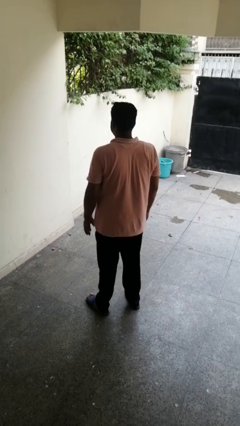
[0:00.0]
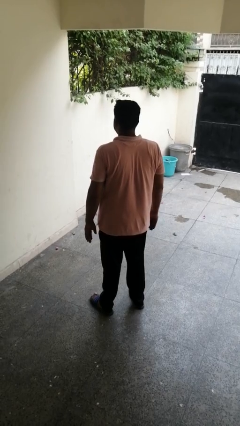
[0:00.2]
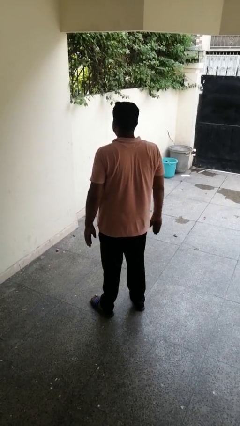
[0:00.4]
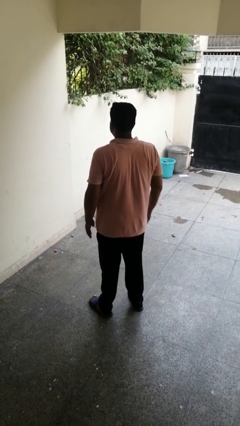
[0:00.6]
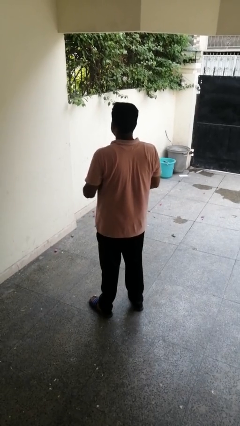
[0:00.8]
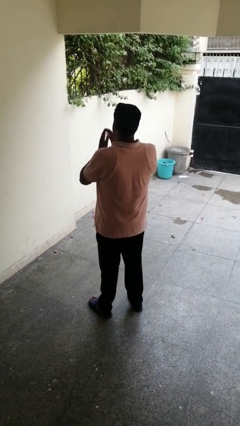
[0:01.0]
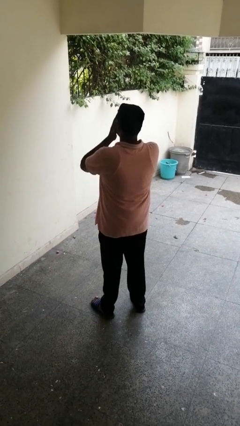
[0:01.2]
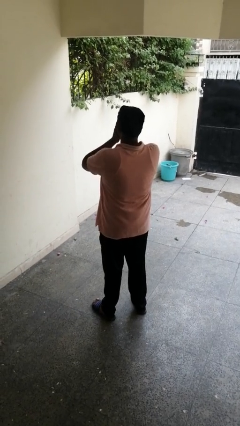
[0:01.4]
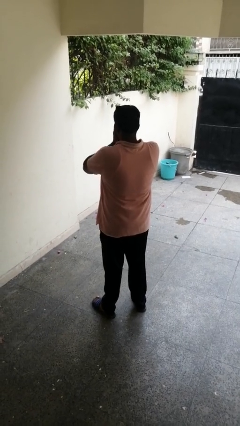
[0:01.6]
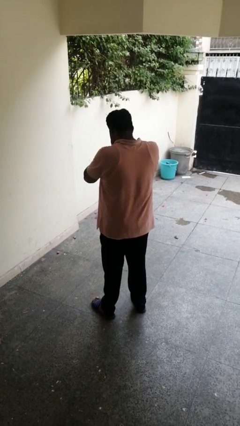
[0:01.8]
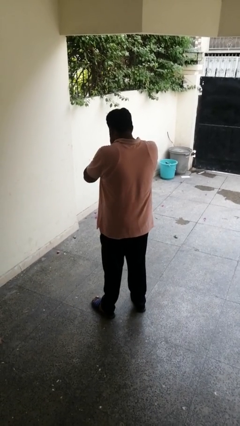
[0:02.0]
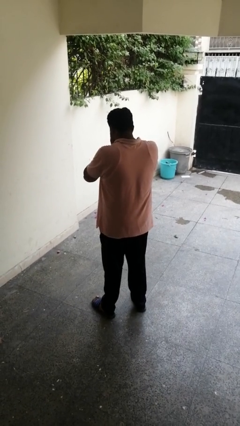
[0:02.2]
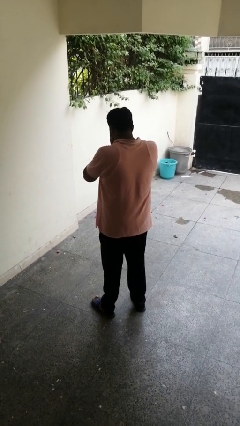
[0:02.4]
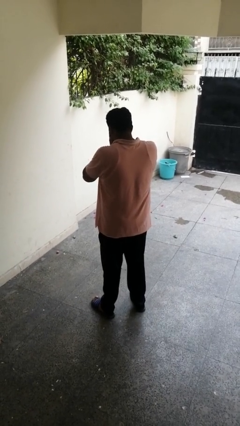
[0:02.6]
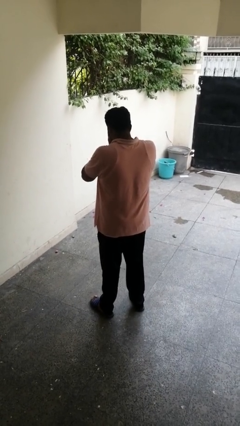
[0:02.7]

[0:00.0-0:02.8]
person sneezes into hand

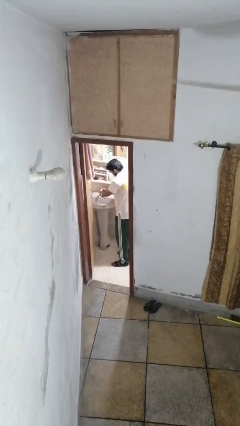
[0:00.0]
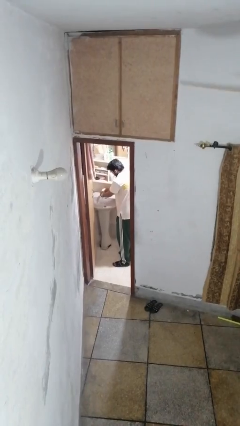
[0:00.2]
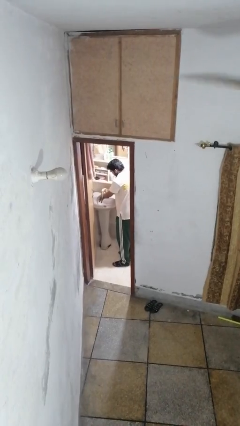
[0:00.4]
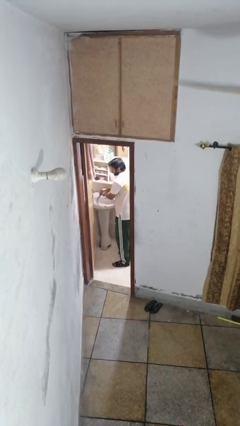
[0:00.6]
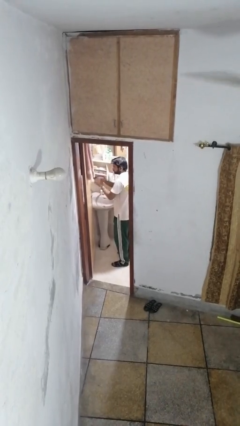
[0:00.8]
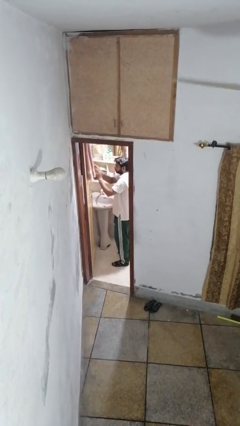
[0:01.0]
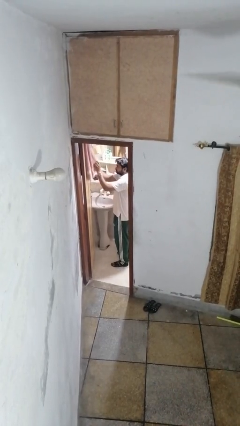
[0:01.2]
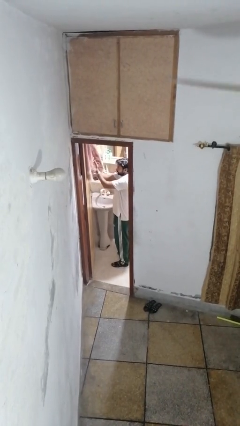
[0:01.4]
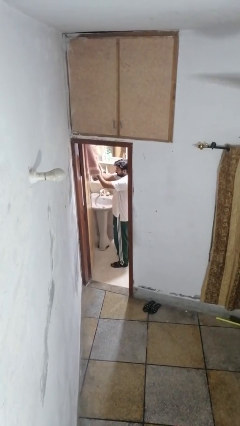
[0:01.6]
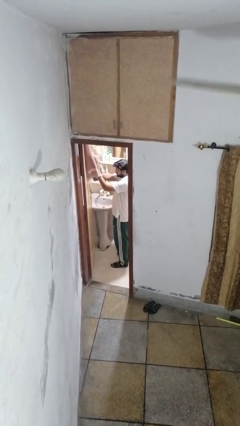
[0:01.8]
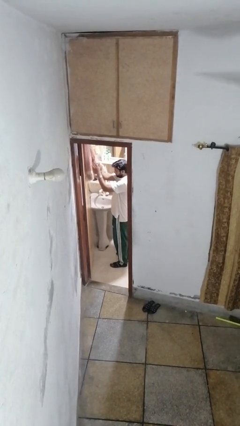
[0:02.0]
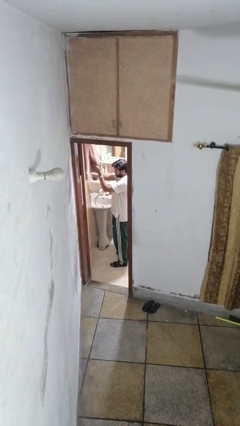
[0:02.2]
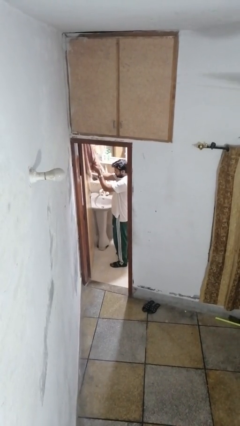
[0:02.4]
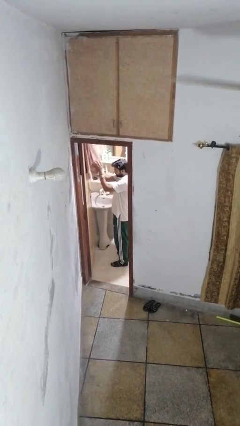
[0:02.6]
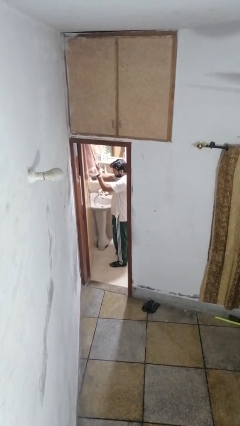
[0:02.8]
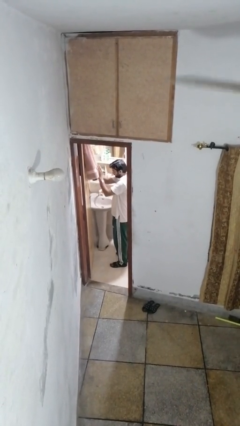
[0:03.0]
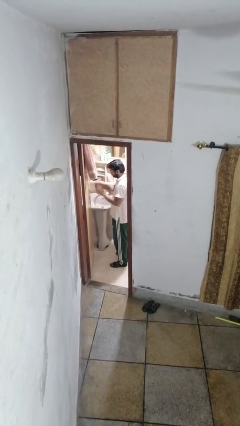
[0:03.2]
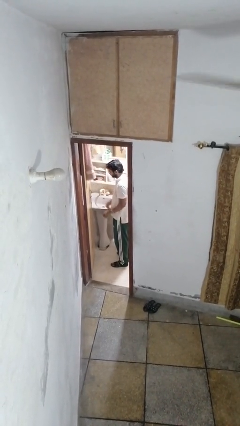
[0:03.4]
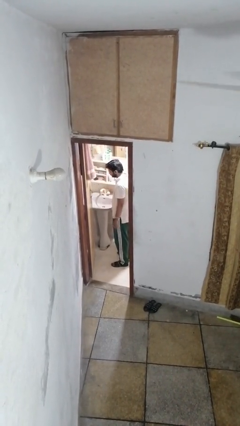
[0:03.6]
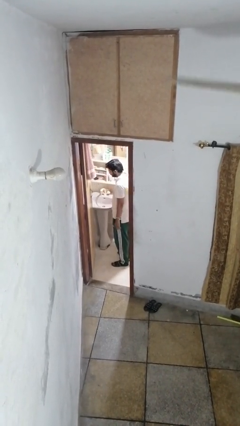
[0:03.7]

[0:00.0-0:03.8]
person dries hands with towel

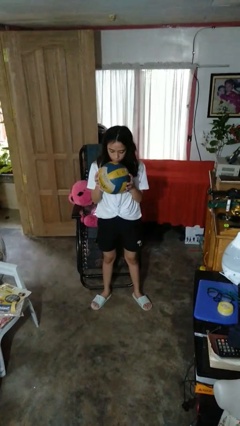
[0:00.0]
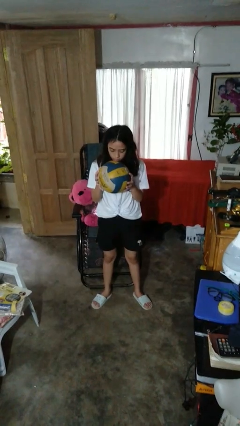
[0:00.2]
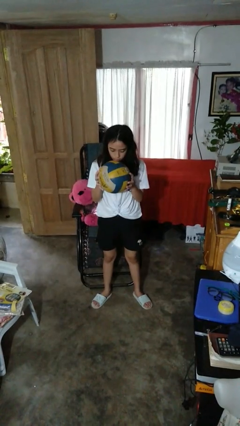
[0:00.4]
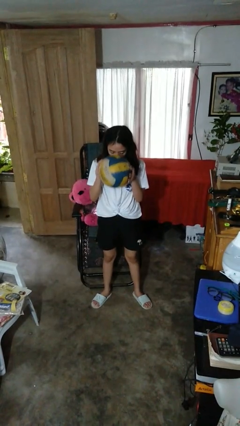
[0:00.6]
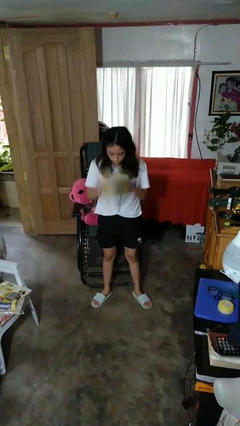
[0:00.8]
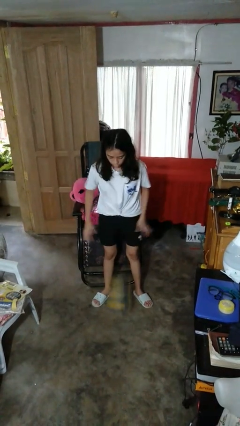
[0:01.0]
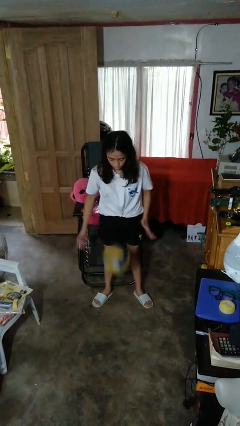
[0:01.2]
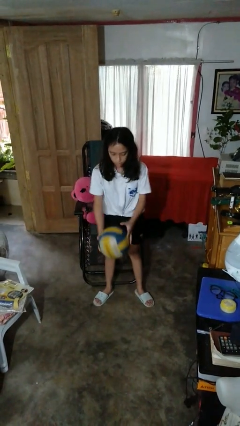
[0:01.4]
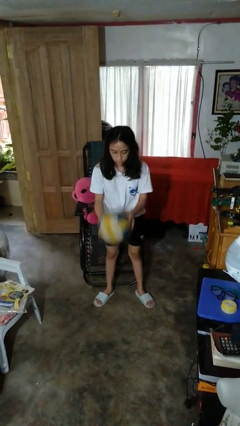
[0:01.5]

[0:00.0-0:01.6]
person bounces ball on floor

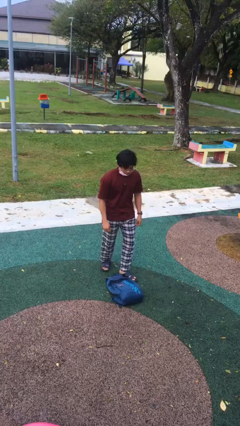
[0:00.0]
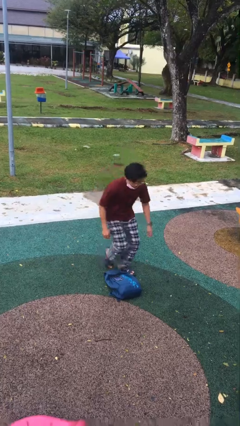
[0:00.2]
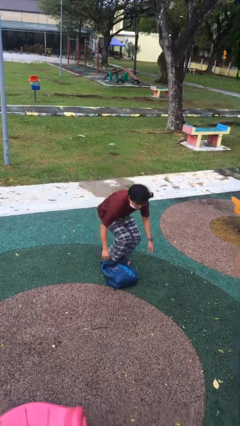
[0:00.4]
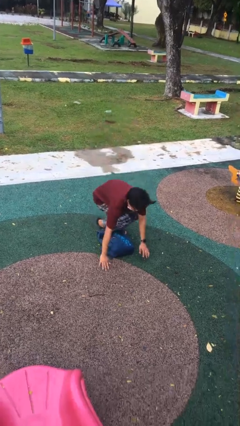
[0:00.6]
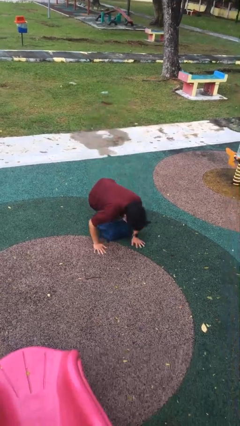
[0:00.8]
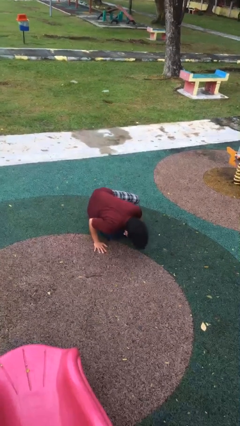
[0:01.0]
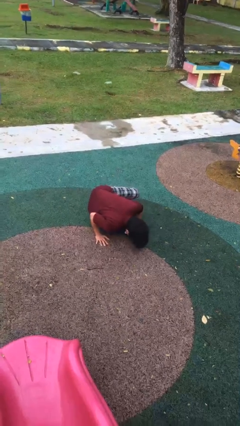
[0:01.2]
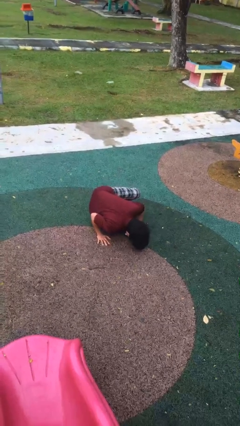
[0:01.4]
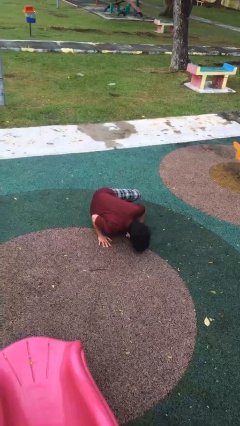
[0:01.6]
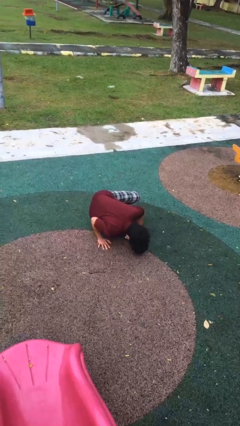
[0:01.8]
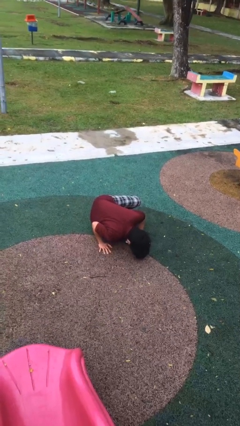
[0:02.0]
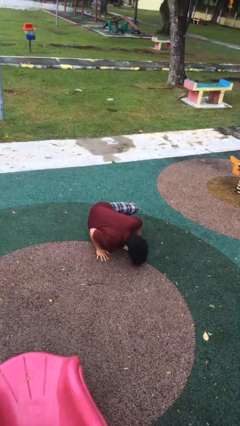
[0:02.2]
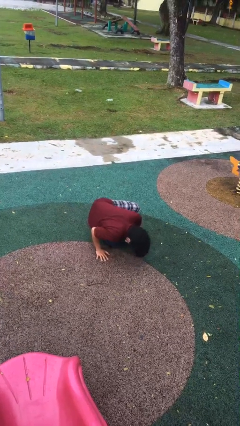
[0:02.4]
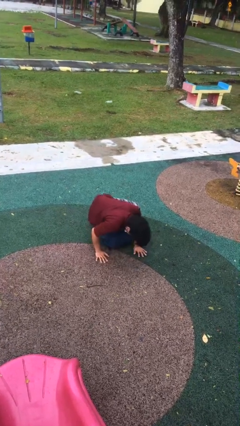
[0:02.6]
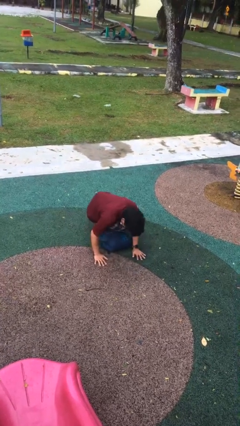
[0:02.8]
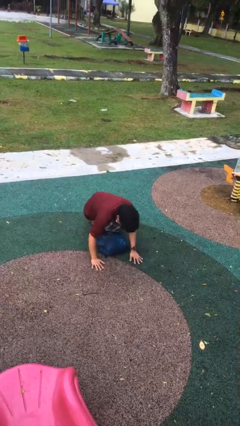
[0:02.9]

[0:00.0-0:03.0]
person trips on object on floor

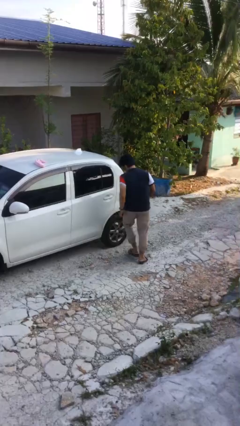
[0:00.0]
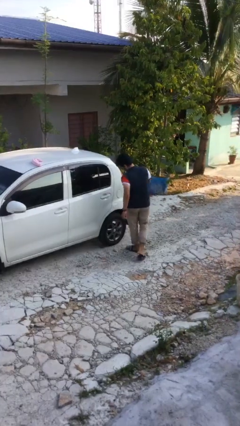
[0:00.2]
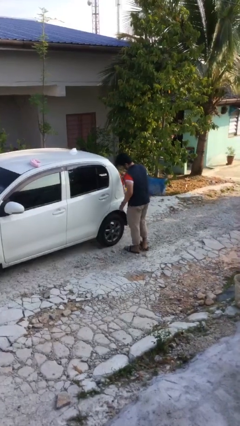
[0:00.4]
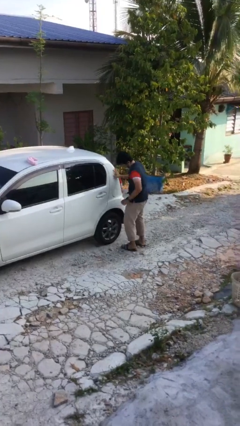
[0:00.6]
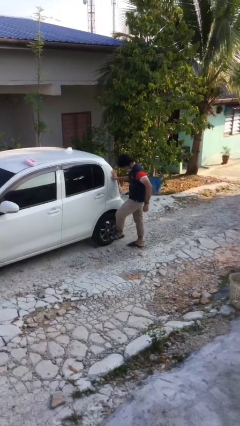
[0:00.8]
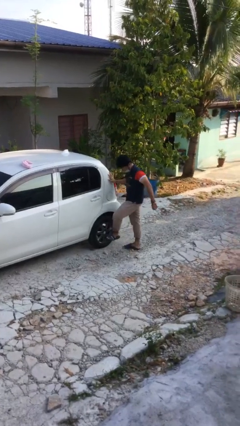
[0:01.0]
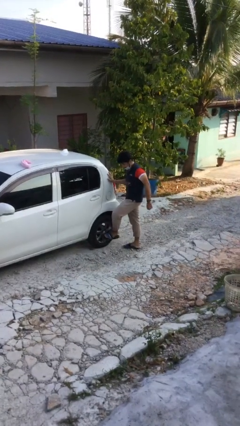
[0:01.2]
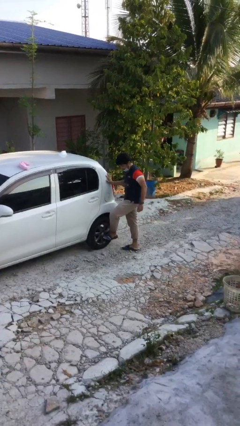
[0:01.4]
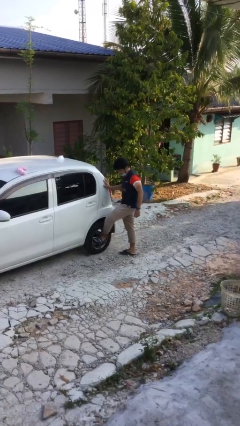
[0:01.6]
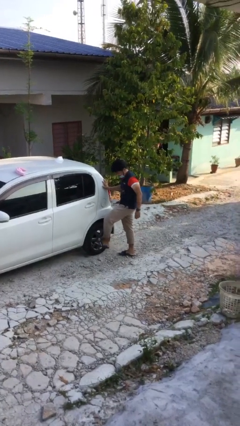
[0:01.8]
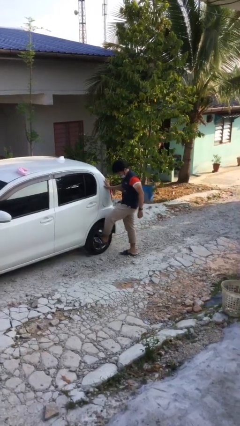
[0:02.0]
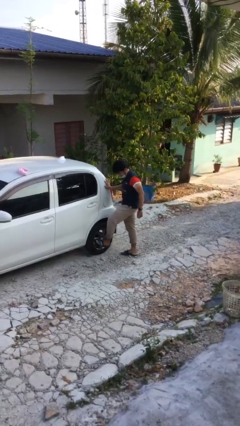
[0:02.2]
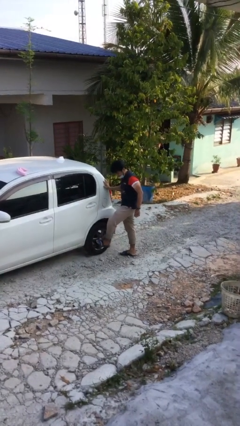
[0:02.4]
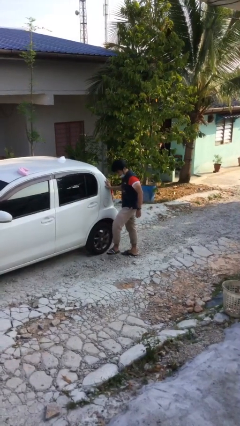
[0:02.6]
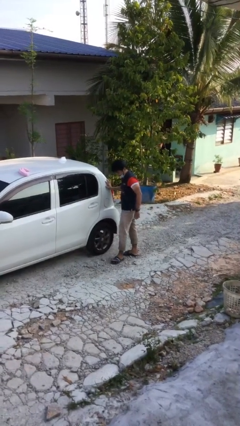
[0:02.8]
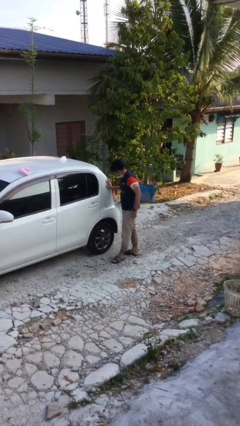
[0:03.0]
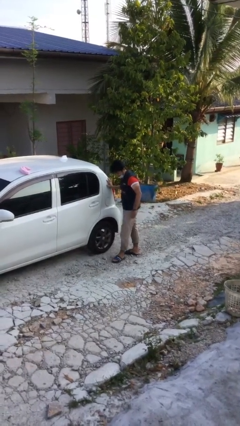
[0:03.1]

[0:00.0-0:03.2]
person kicks car tires

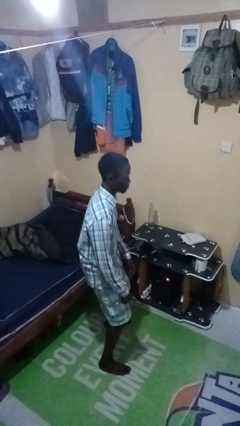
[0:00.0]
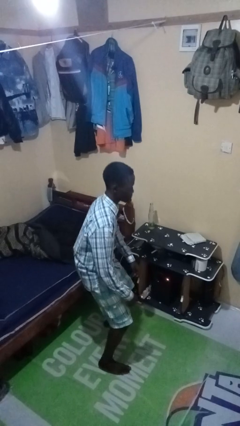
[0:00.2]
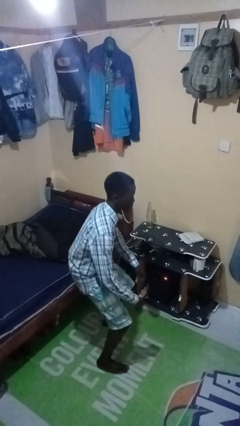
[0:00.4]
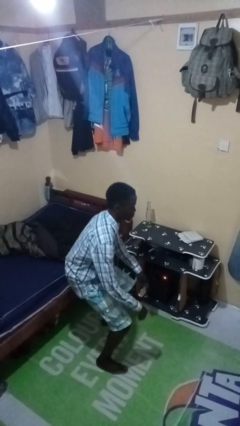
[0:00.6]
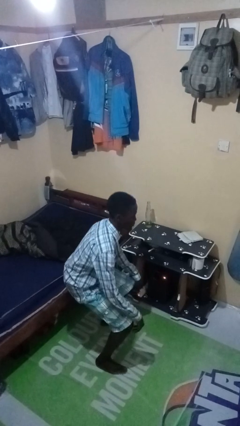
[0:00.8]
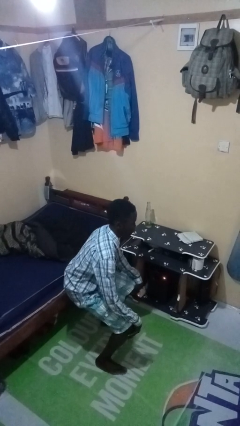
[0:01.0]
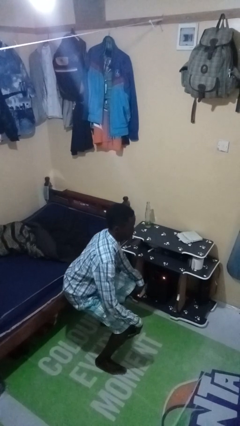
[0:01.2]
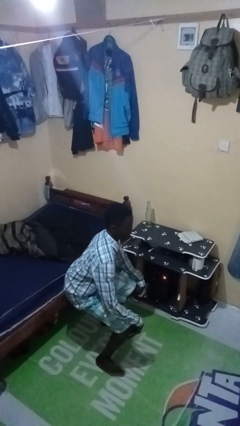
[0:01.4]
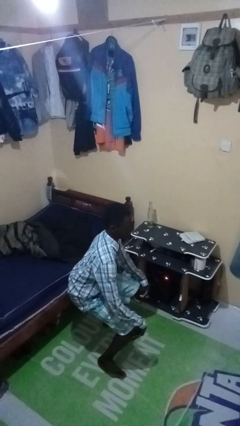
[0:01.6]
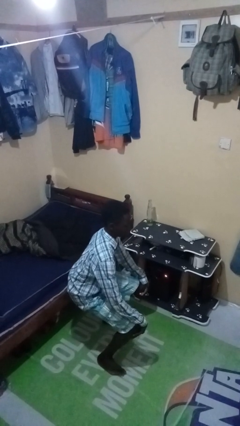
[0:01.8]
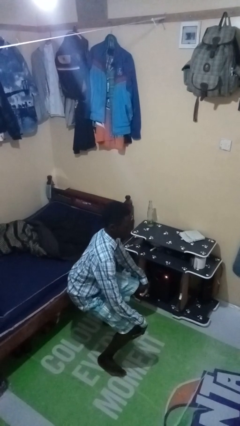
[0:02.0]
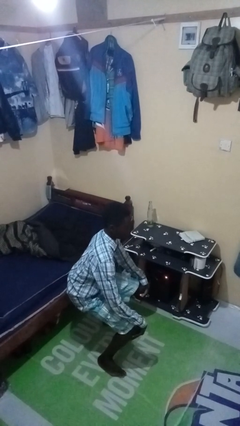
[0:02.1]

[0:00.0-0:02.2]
person squats

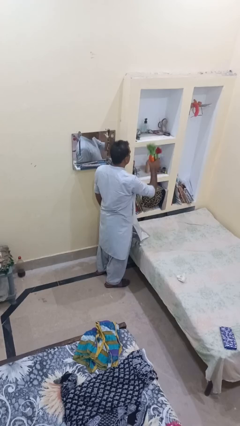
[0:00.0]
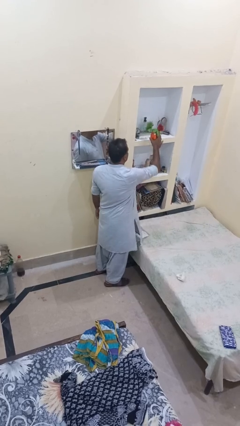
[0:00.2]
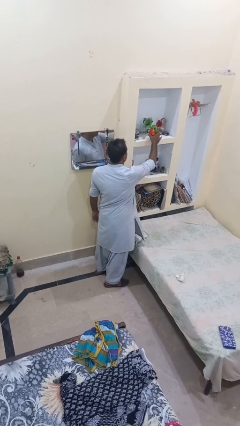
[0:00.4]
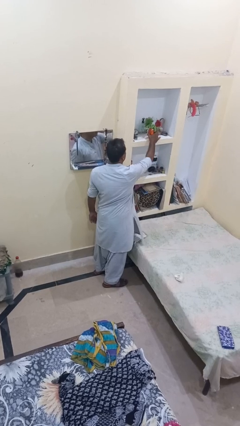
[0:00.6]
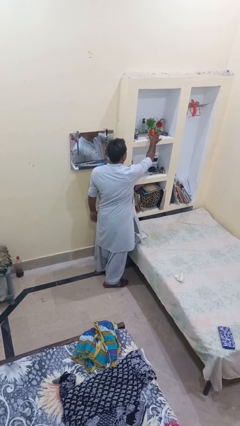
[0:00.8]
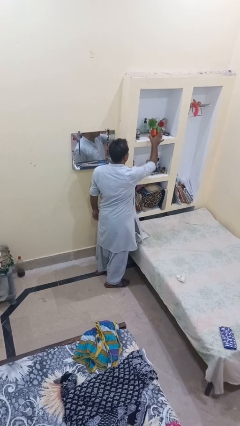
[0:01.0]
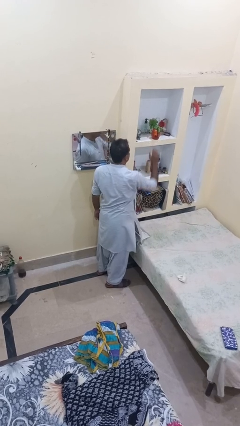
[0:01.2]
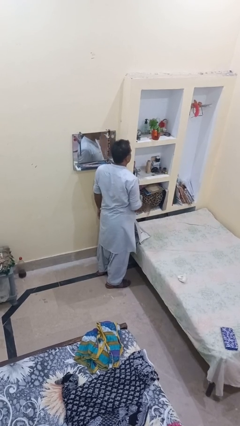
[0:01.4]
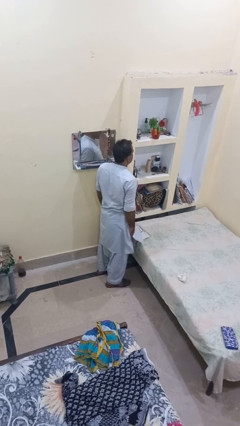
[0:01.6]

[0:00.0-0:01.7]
person puts down object on shelf
